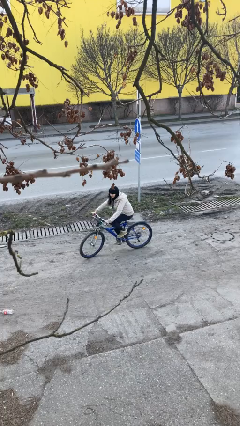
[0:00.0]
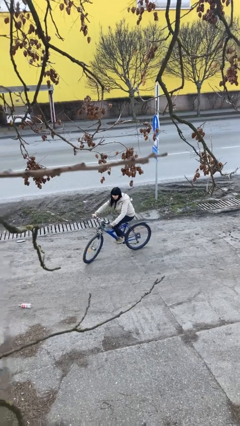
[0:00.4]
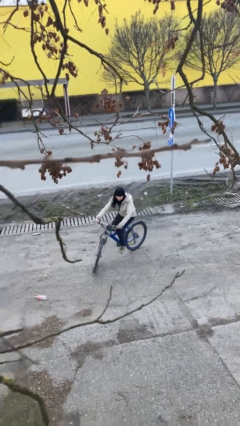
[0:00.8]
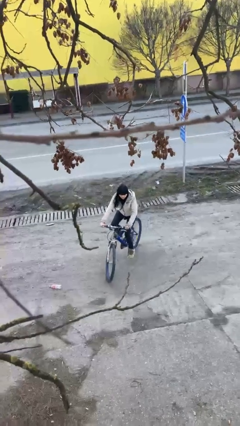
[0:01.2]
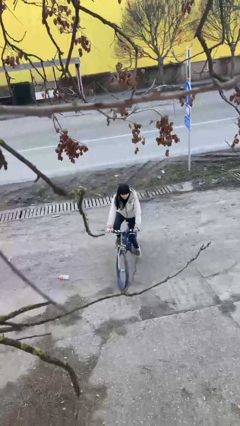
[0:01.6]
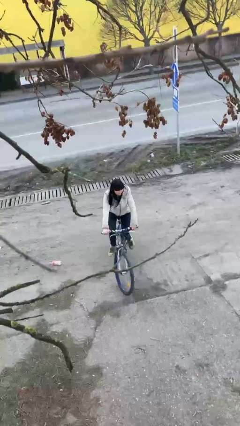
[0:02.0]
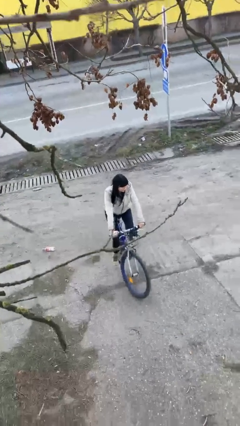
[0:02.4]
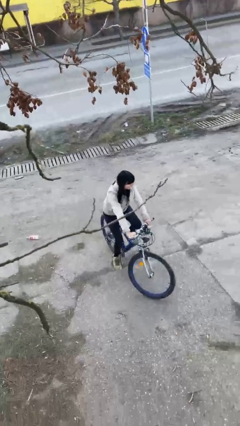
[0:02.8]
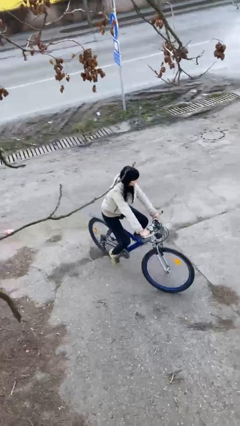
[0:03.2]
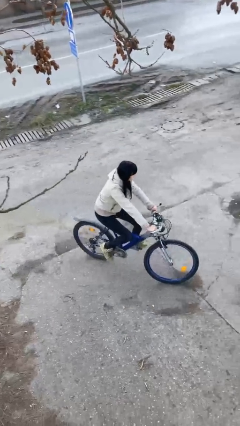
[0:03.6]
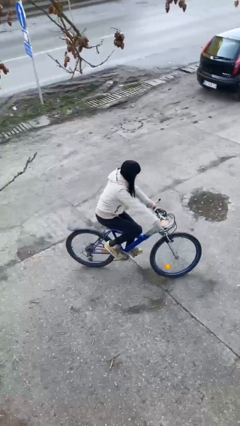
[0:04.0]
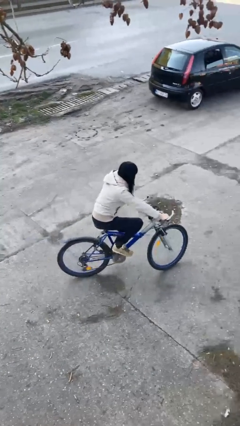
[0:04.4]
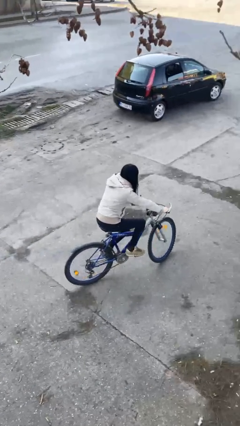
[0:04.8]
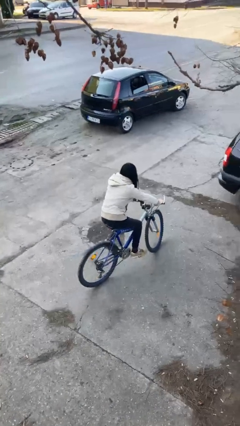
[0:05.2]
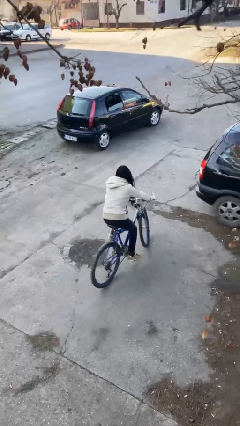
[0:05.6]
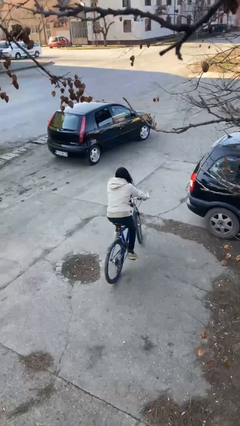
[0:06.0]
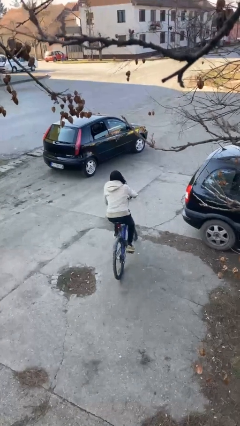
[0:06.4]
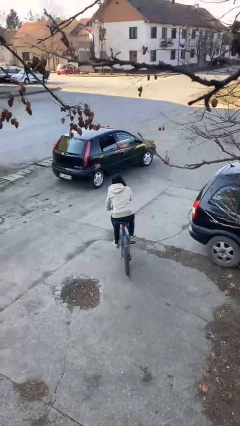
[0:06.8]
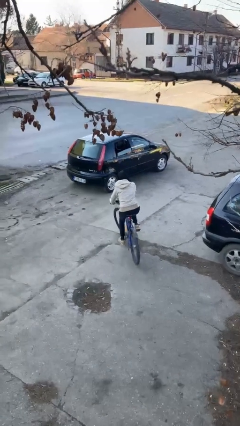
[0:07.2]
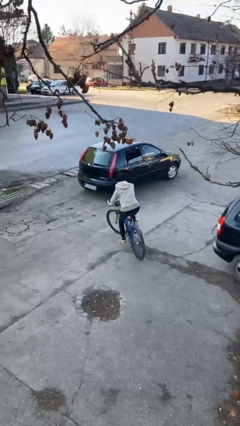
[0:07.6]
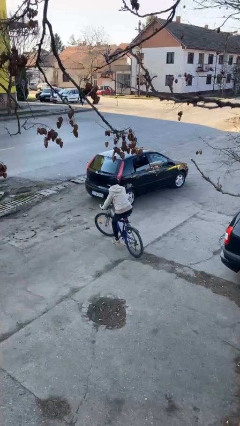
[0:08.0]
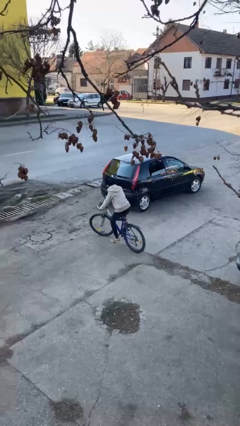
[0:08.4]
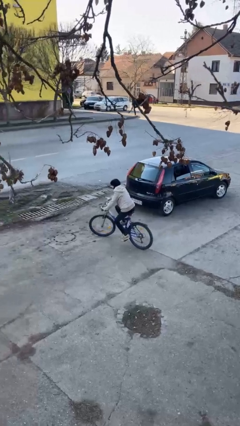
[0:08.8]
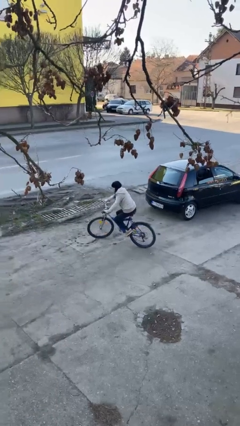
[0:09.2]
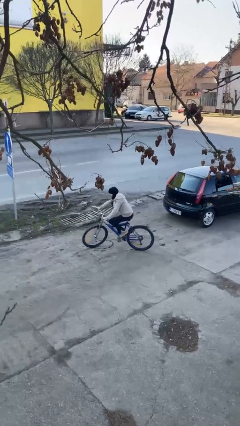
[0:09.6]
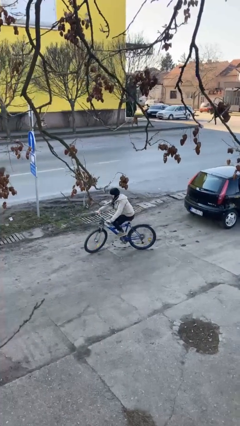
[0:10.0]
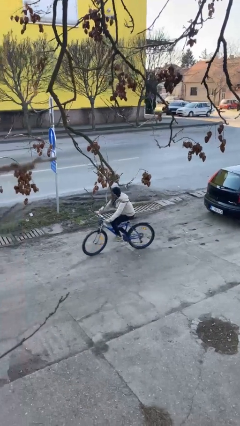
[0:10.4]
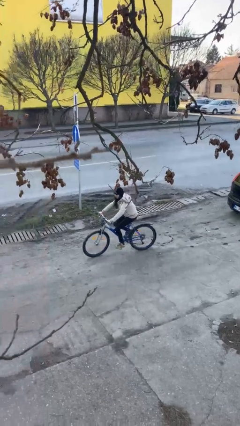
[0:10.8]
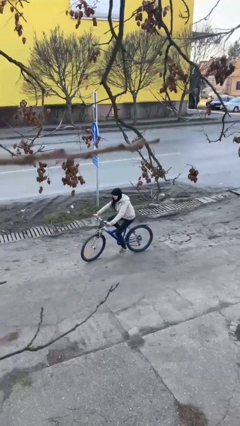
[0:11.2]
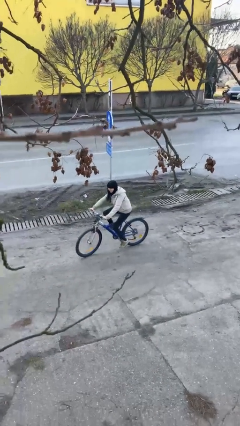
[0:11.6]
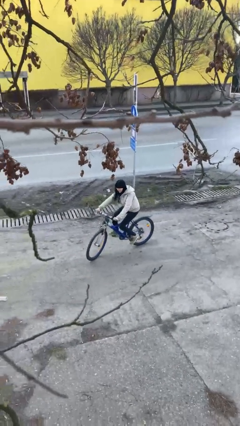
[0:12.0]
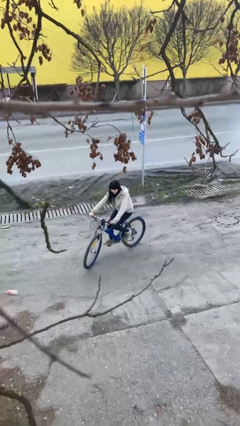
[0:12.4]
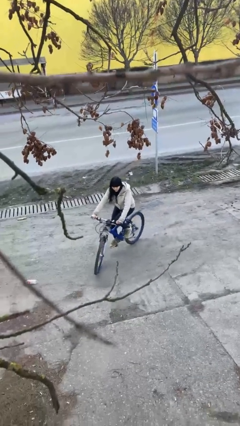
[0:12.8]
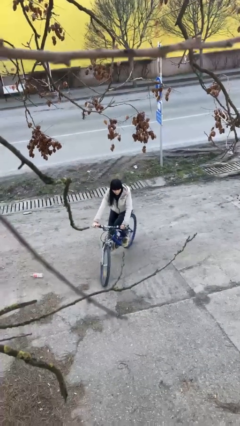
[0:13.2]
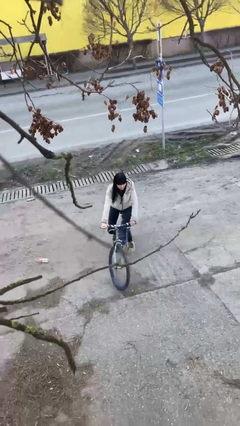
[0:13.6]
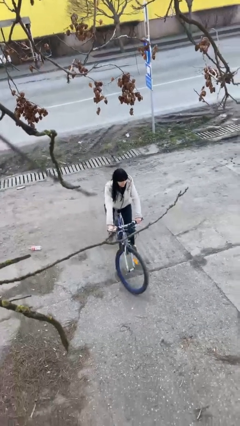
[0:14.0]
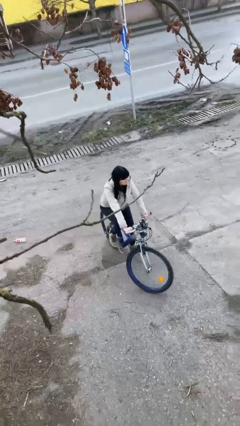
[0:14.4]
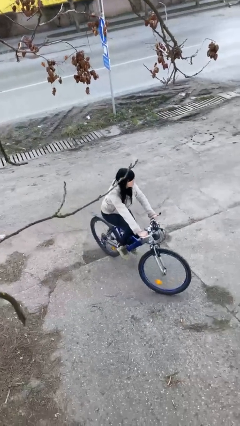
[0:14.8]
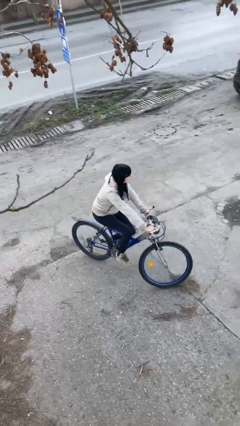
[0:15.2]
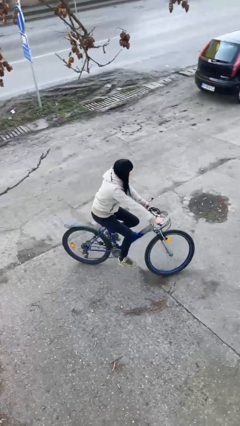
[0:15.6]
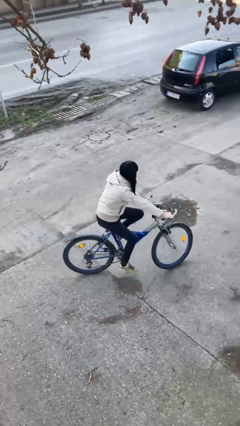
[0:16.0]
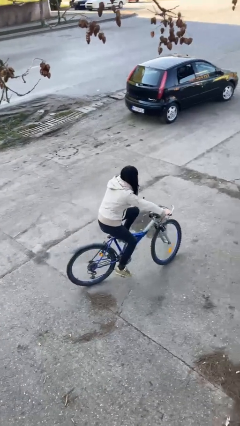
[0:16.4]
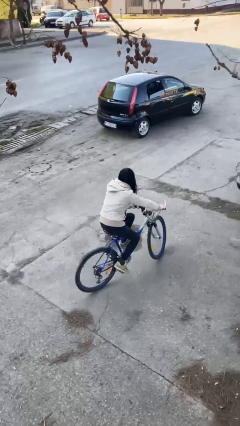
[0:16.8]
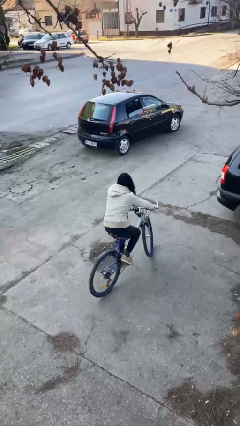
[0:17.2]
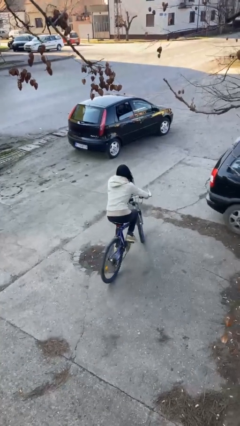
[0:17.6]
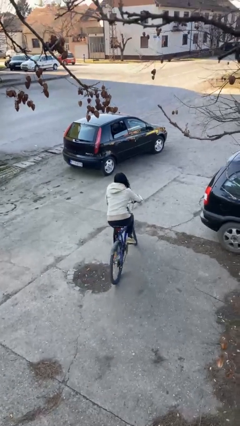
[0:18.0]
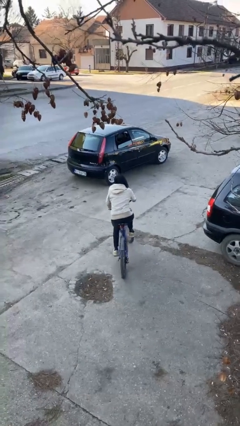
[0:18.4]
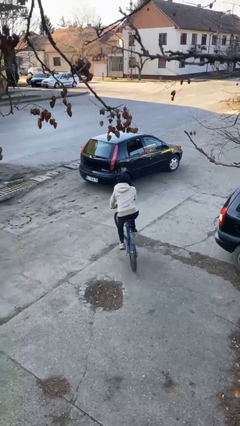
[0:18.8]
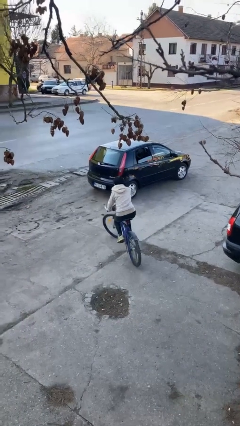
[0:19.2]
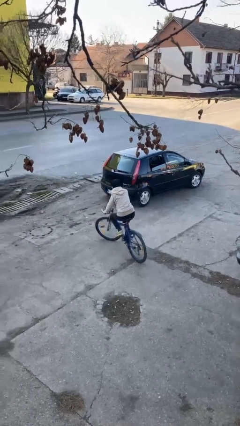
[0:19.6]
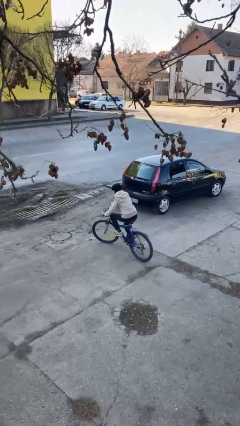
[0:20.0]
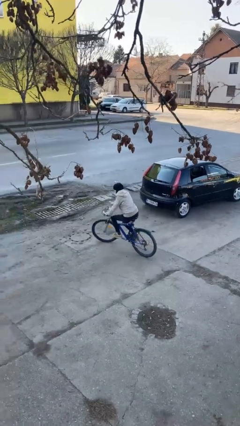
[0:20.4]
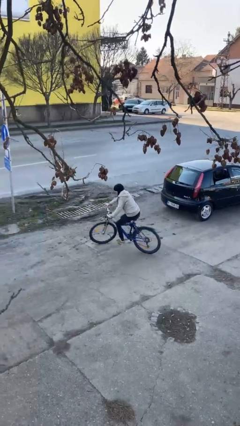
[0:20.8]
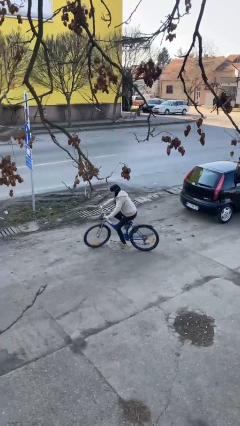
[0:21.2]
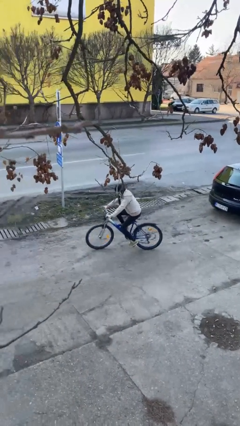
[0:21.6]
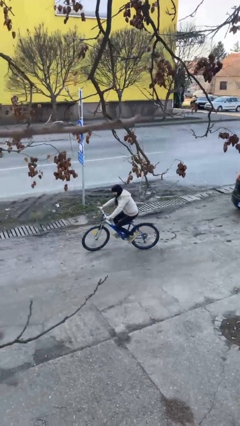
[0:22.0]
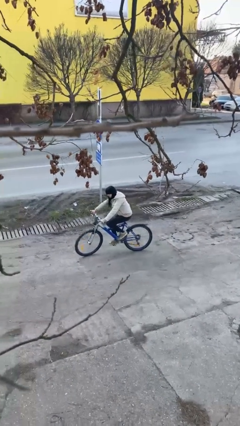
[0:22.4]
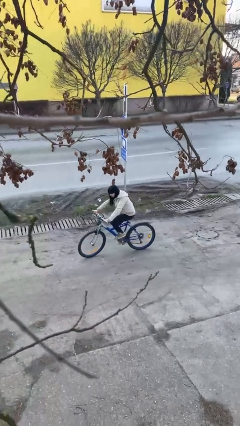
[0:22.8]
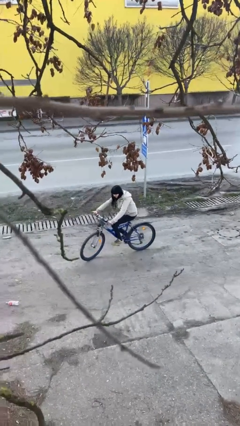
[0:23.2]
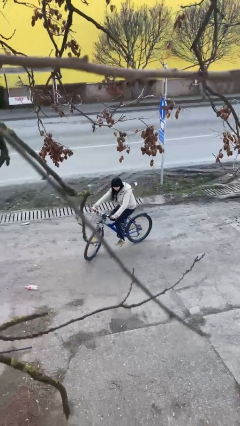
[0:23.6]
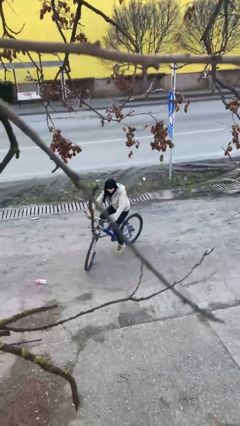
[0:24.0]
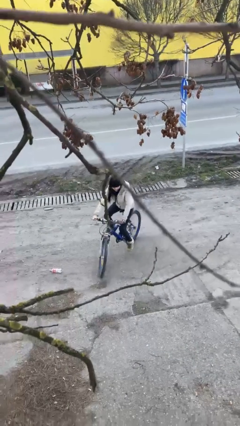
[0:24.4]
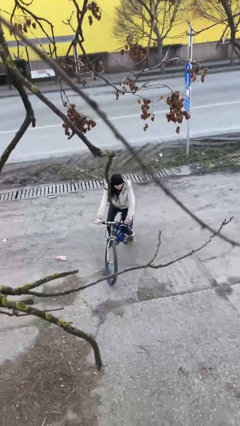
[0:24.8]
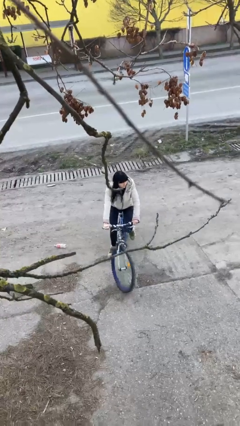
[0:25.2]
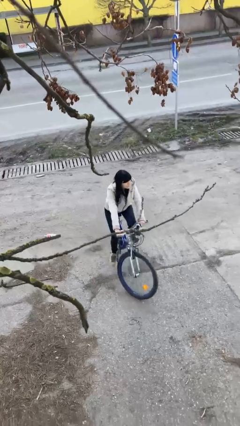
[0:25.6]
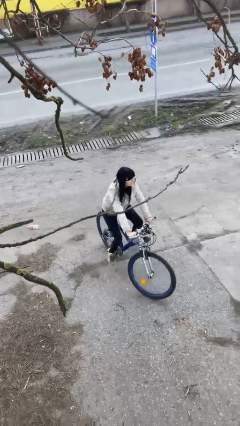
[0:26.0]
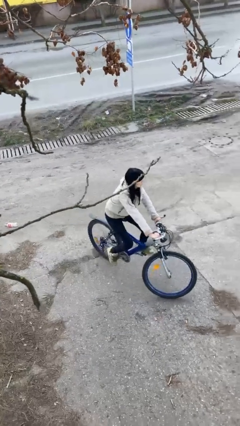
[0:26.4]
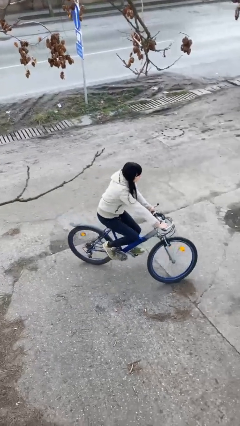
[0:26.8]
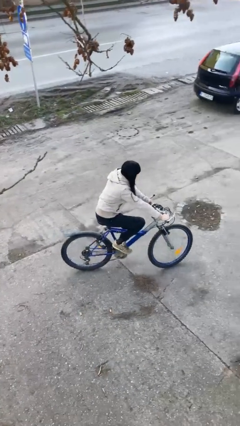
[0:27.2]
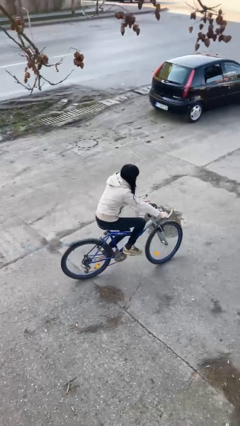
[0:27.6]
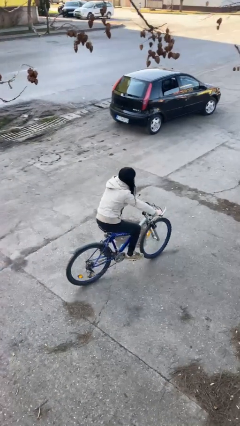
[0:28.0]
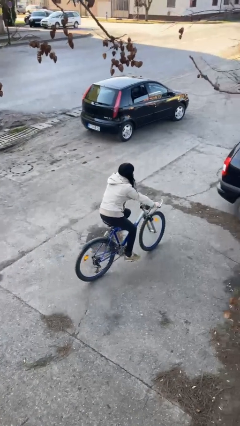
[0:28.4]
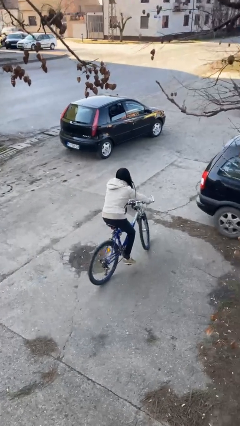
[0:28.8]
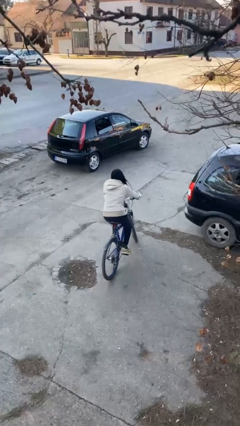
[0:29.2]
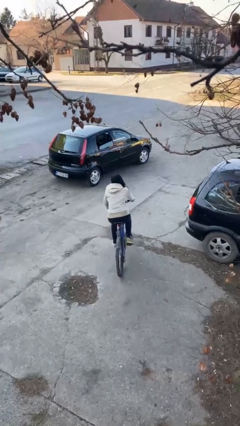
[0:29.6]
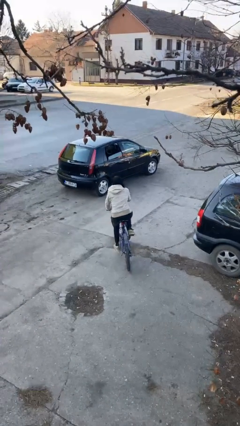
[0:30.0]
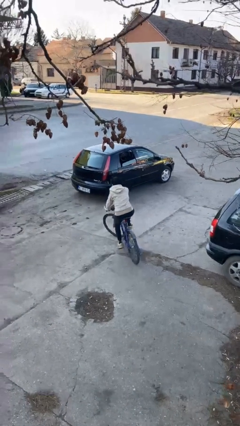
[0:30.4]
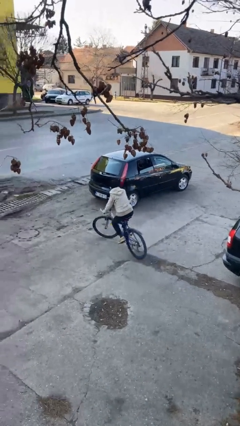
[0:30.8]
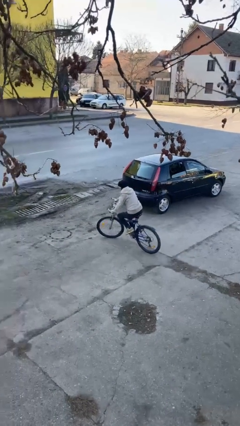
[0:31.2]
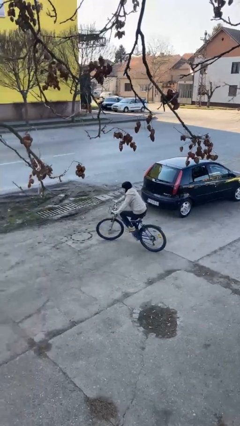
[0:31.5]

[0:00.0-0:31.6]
person rides bicycle

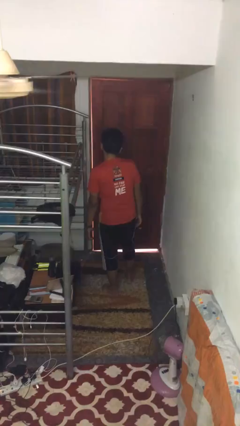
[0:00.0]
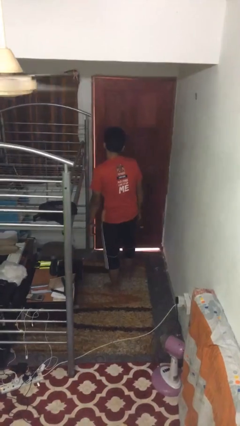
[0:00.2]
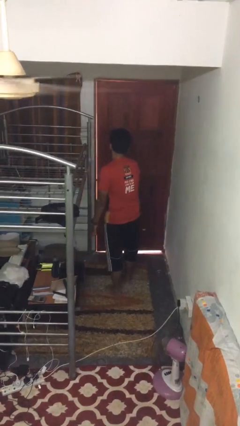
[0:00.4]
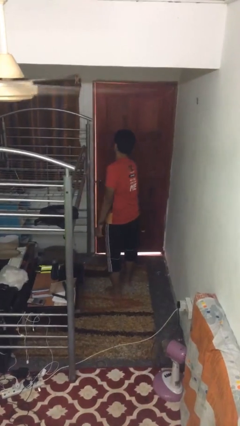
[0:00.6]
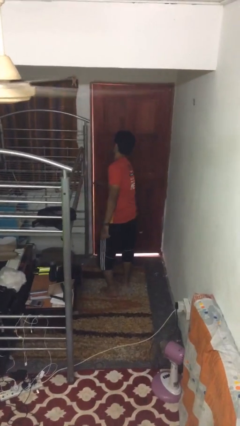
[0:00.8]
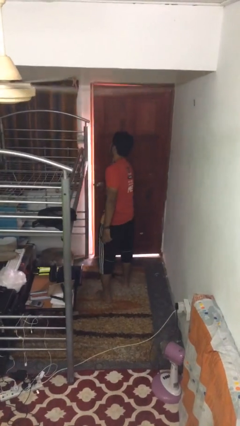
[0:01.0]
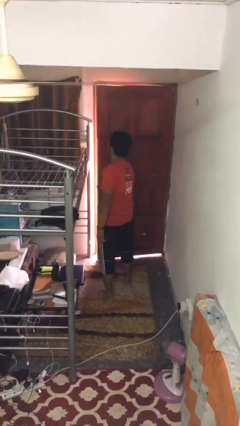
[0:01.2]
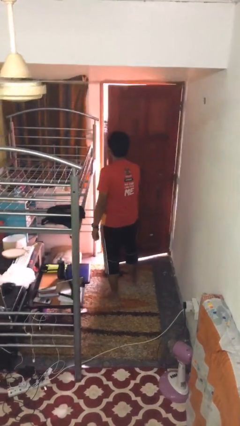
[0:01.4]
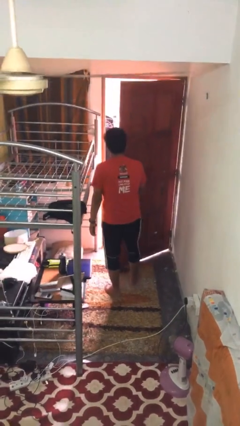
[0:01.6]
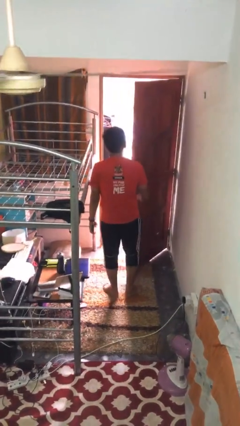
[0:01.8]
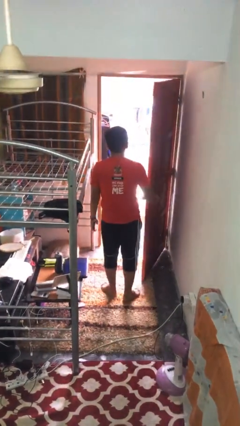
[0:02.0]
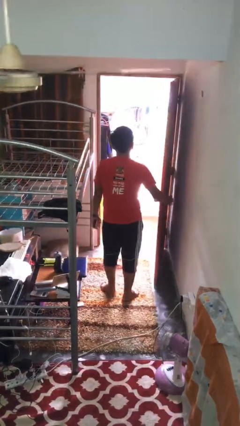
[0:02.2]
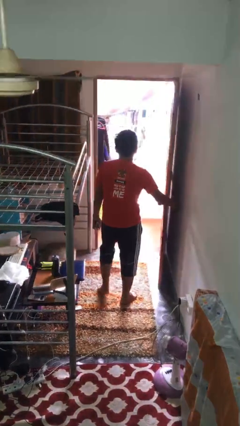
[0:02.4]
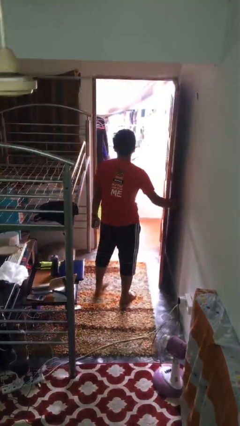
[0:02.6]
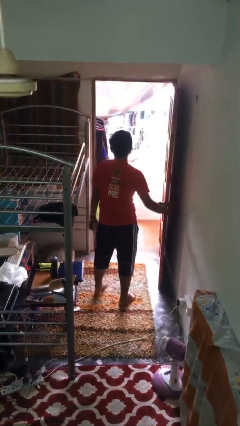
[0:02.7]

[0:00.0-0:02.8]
person opens facility door
